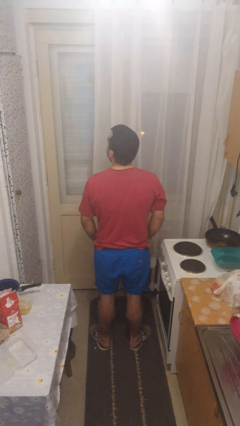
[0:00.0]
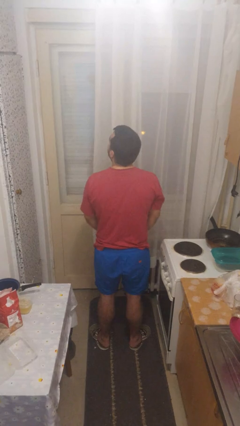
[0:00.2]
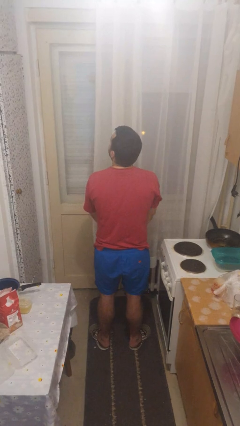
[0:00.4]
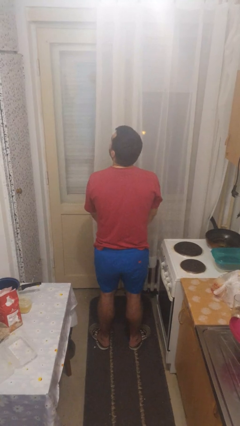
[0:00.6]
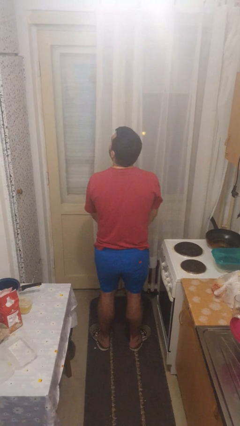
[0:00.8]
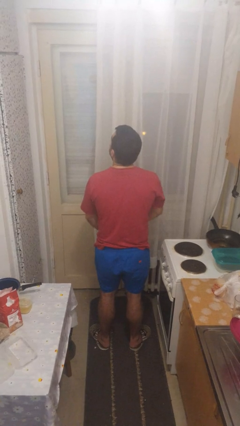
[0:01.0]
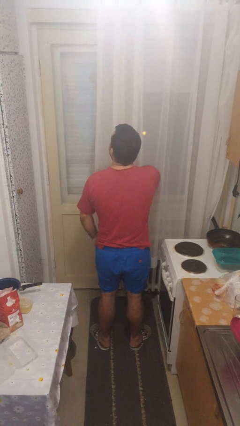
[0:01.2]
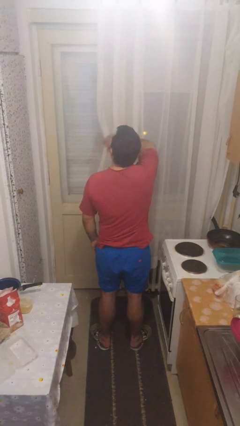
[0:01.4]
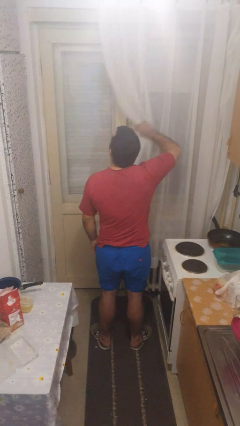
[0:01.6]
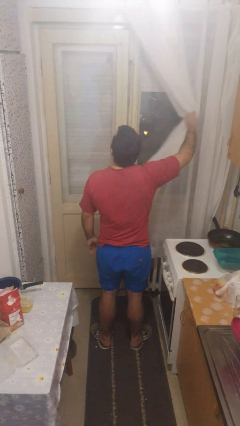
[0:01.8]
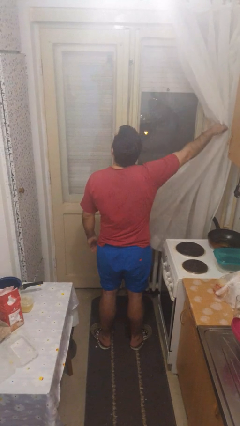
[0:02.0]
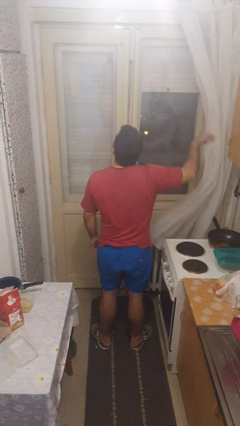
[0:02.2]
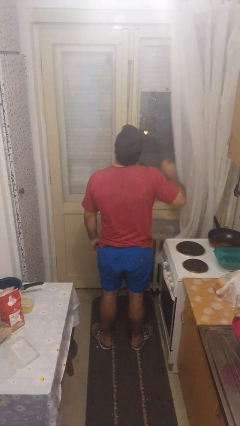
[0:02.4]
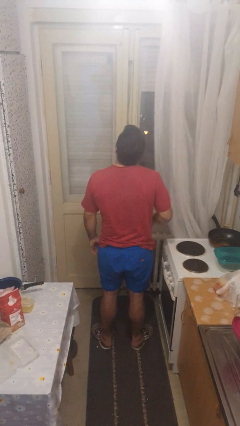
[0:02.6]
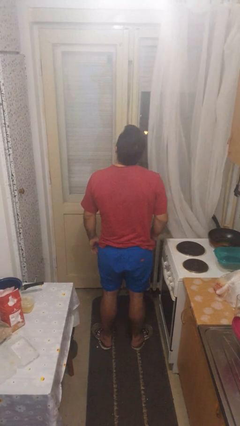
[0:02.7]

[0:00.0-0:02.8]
person opens curtains

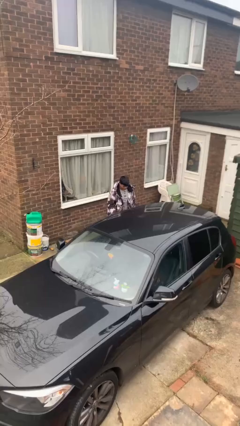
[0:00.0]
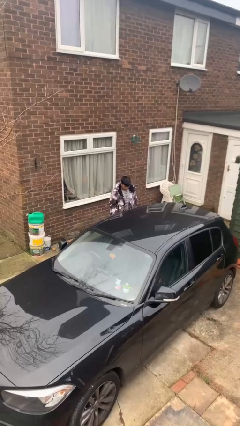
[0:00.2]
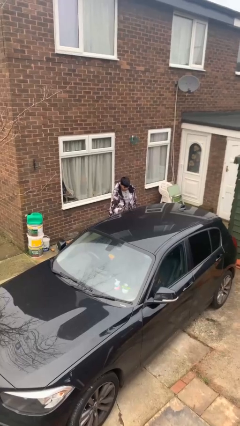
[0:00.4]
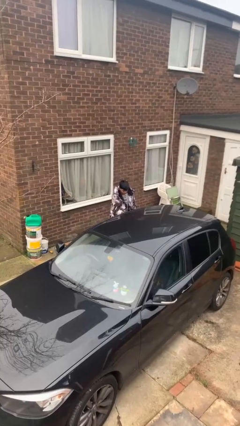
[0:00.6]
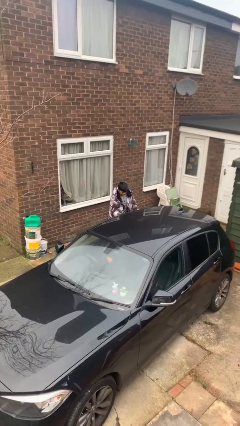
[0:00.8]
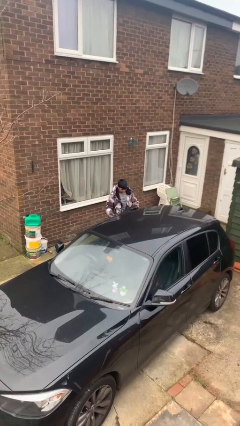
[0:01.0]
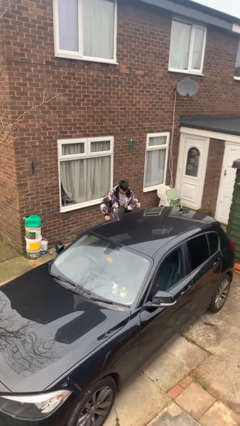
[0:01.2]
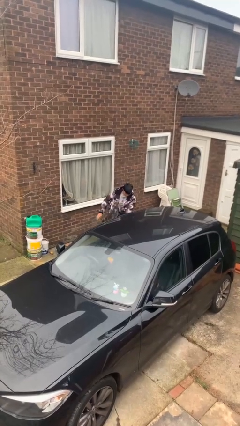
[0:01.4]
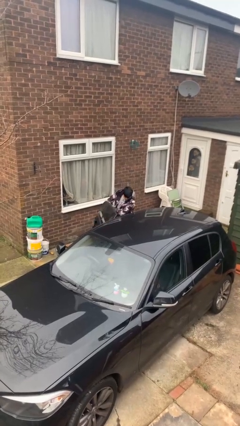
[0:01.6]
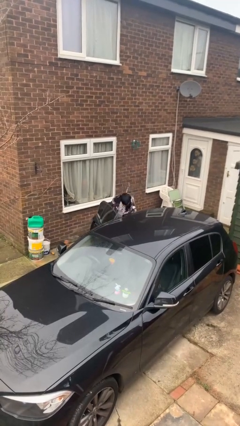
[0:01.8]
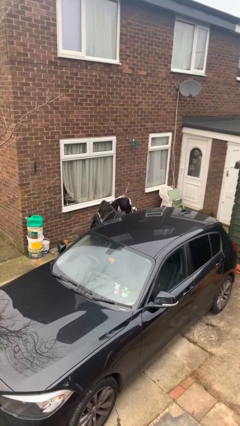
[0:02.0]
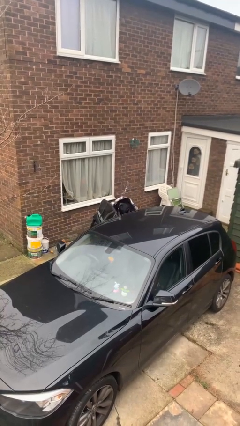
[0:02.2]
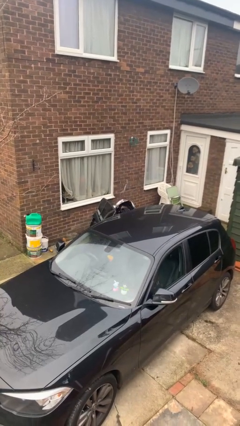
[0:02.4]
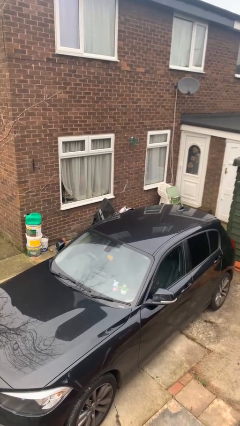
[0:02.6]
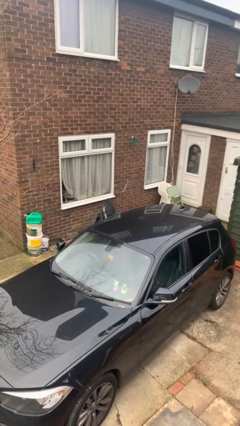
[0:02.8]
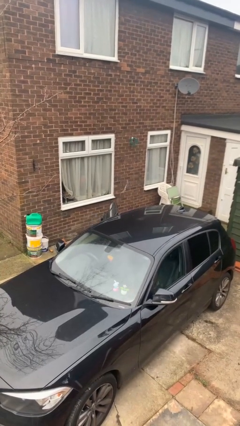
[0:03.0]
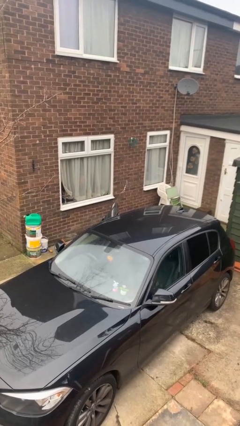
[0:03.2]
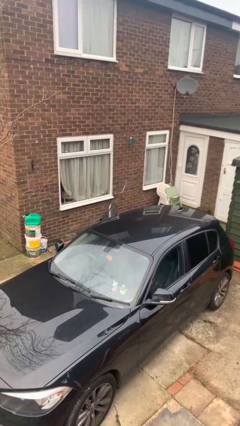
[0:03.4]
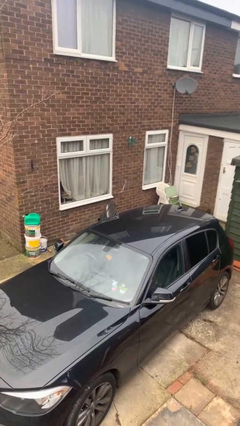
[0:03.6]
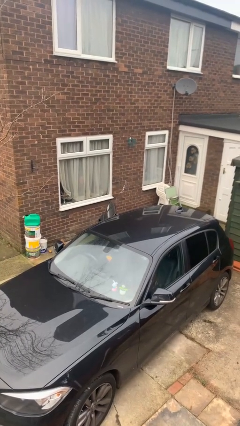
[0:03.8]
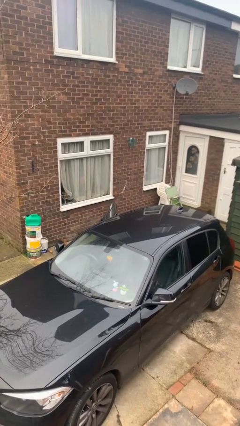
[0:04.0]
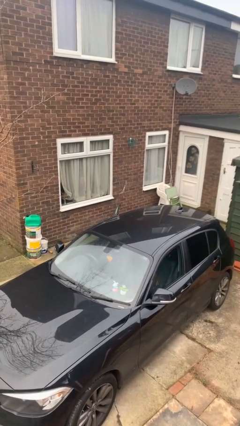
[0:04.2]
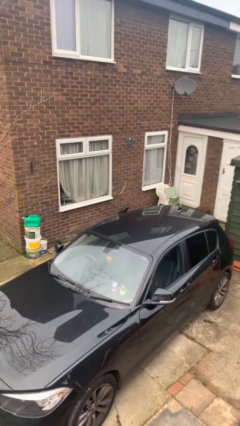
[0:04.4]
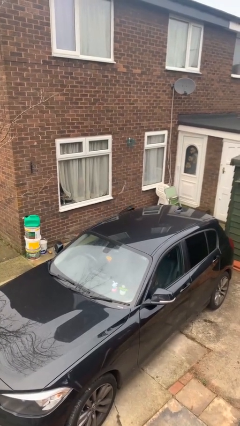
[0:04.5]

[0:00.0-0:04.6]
car picks up person

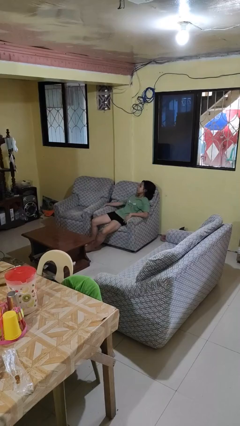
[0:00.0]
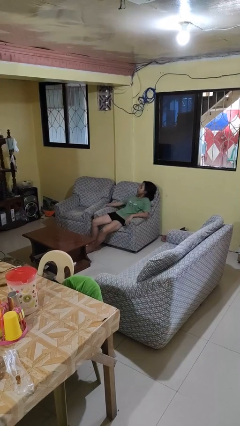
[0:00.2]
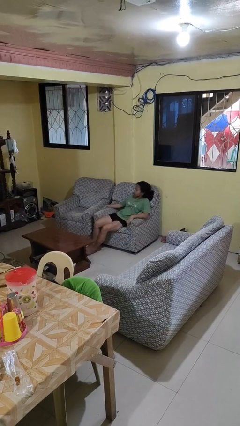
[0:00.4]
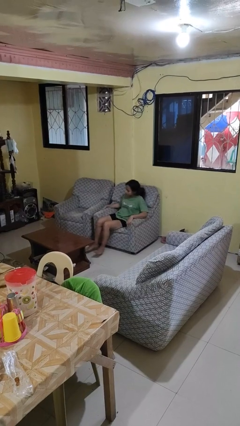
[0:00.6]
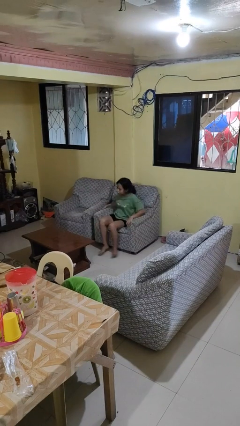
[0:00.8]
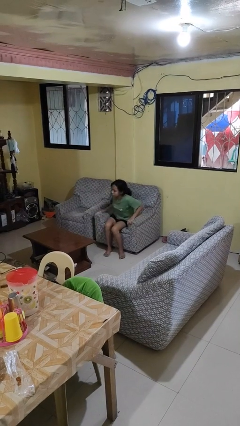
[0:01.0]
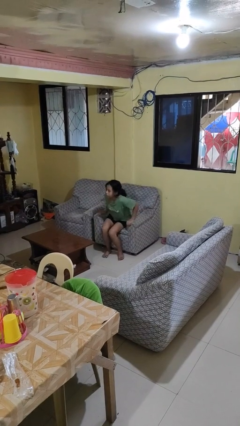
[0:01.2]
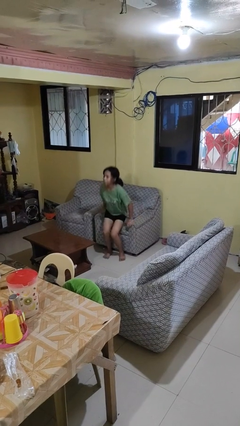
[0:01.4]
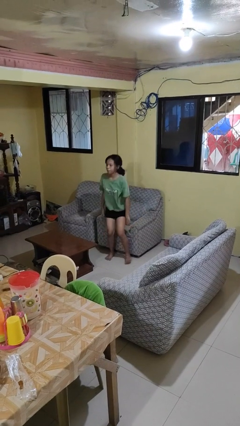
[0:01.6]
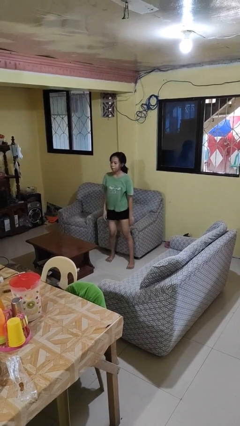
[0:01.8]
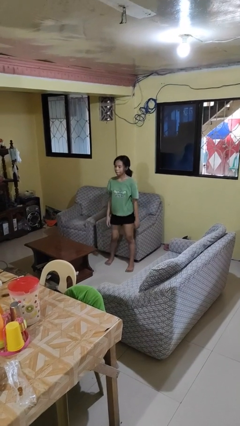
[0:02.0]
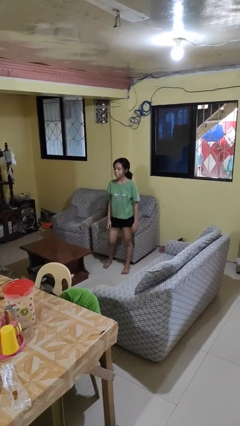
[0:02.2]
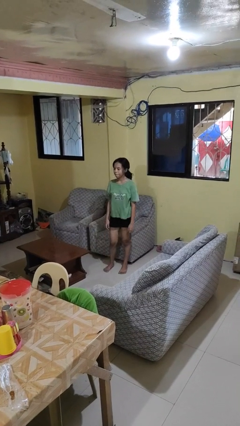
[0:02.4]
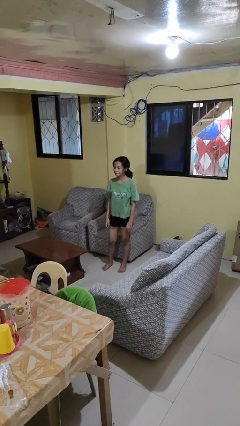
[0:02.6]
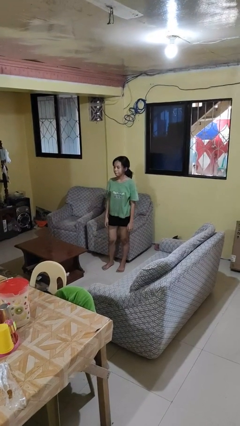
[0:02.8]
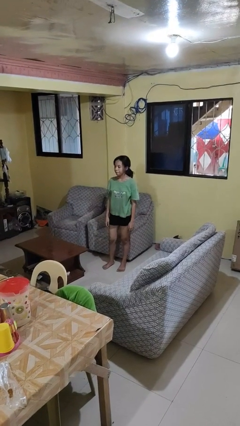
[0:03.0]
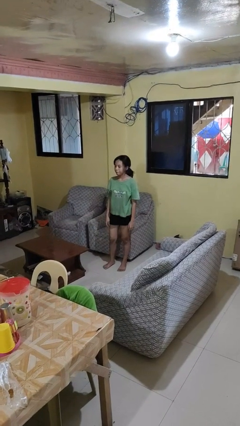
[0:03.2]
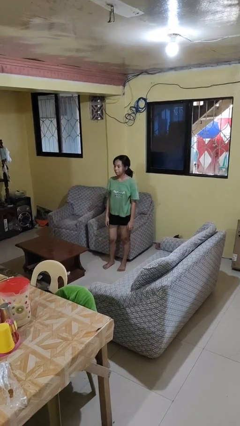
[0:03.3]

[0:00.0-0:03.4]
person stands up

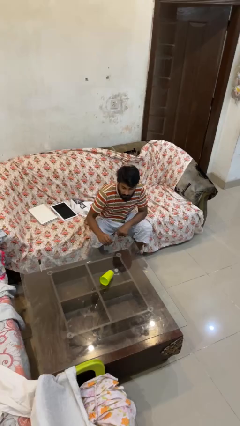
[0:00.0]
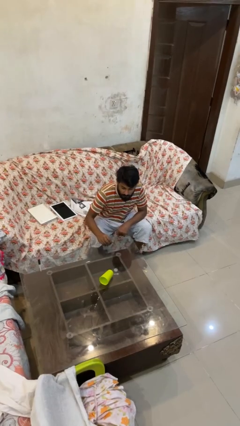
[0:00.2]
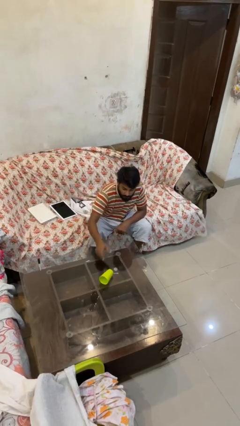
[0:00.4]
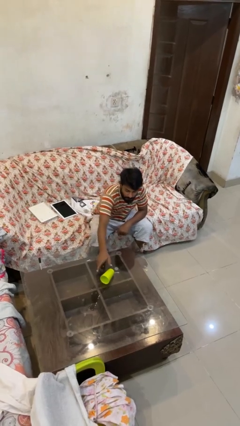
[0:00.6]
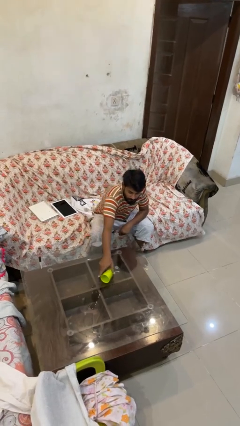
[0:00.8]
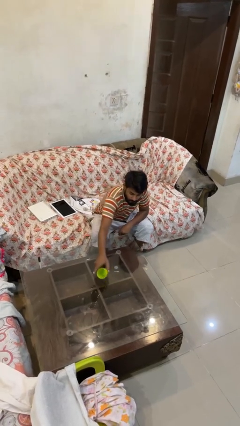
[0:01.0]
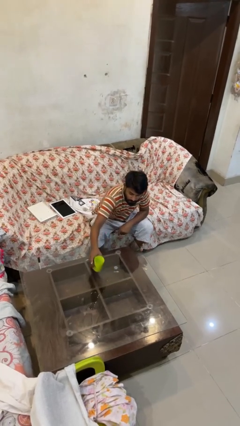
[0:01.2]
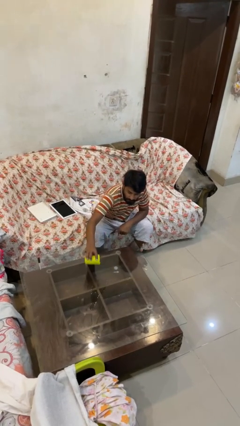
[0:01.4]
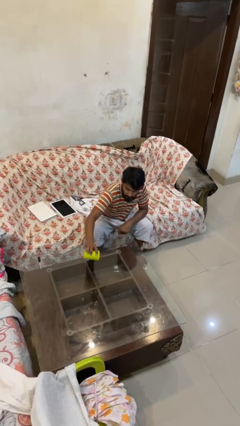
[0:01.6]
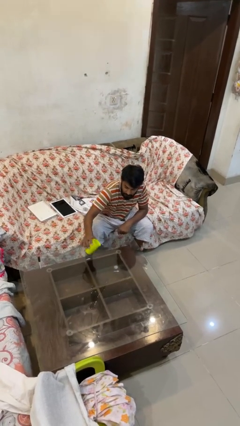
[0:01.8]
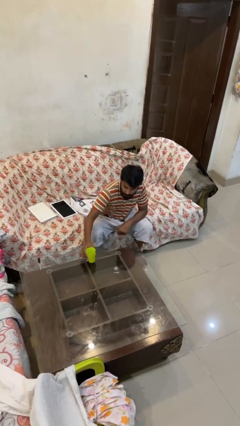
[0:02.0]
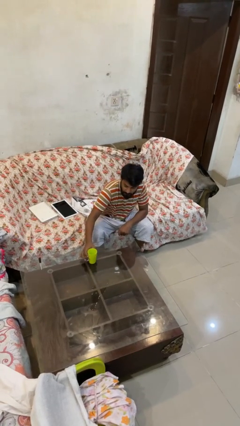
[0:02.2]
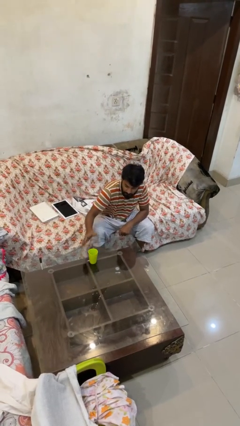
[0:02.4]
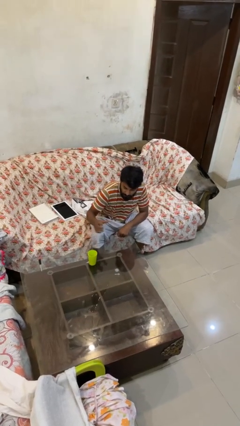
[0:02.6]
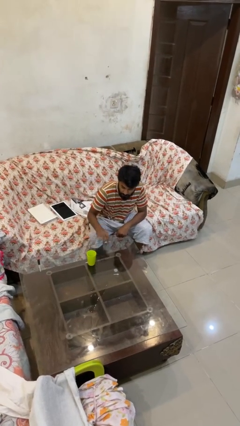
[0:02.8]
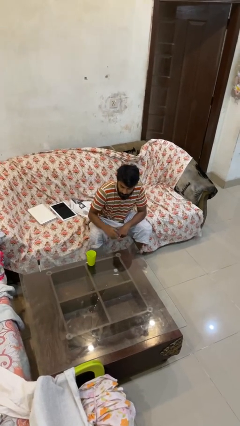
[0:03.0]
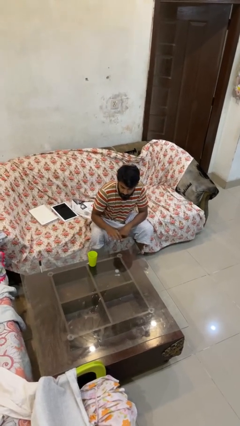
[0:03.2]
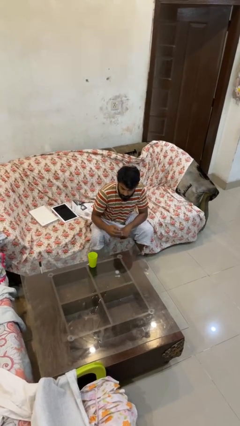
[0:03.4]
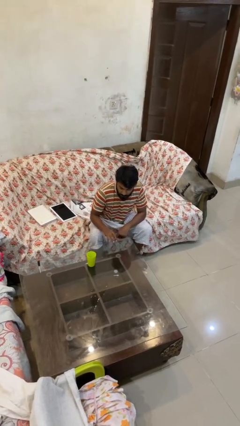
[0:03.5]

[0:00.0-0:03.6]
person sets upright glass

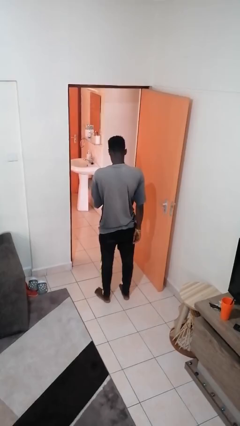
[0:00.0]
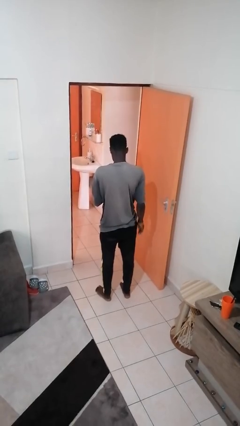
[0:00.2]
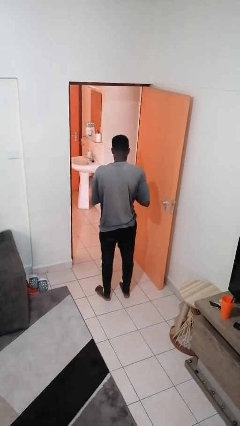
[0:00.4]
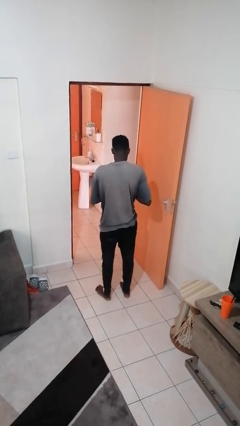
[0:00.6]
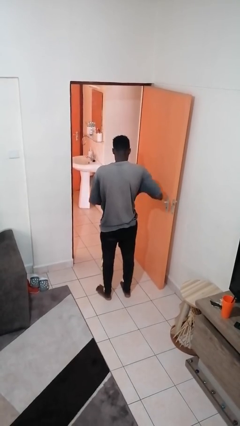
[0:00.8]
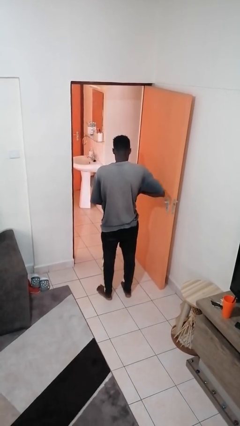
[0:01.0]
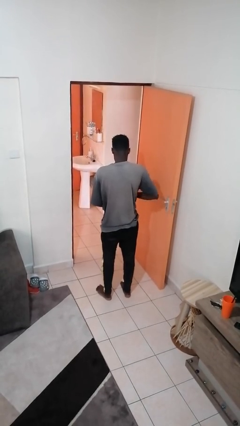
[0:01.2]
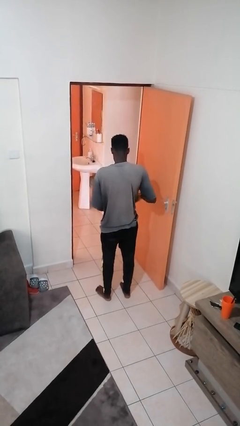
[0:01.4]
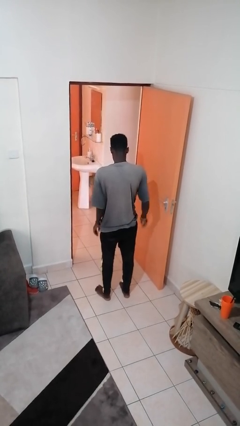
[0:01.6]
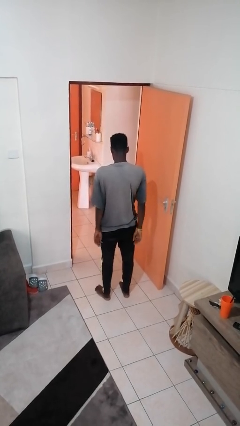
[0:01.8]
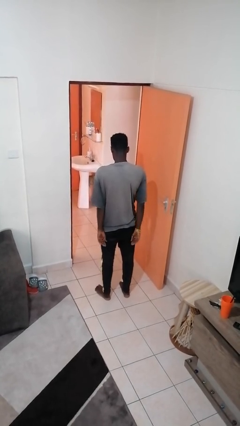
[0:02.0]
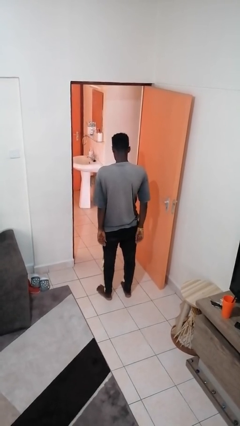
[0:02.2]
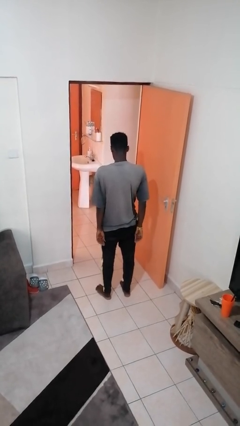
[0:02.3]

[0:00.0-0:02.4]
person puts phone into pocket

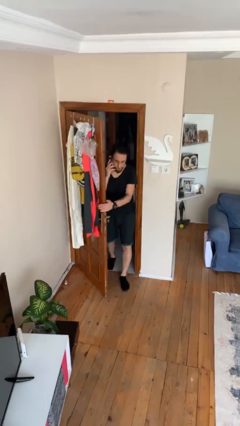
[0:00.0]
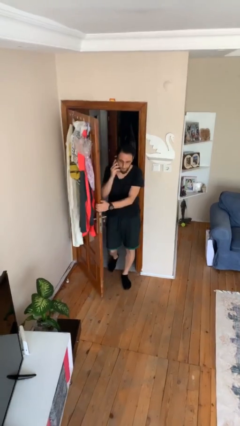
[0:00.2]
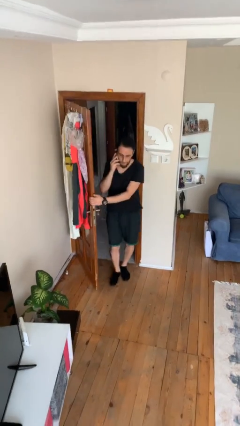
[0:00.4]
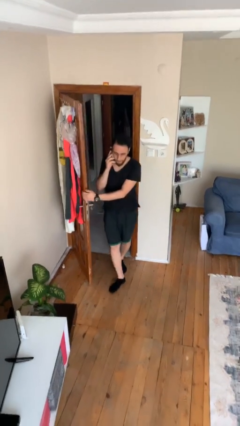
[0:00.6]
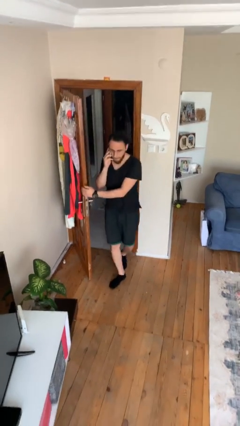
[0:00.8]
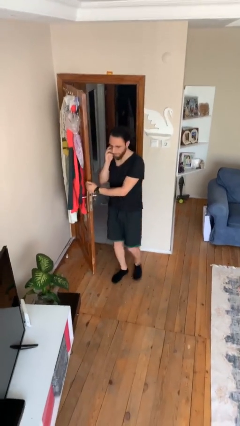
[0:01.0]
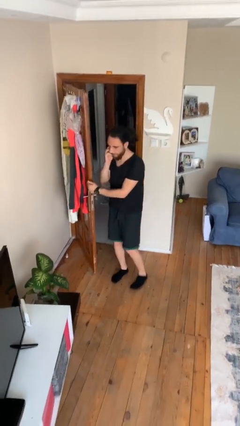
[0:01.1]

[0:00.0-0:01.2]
person enters scene through structure
